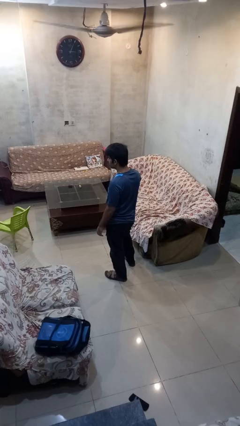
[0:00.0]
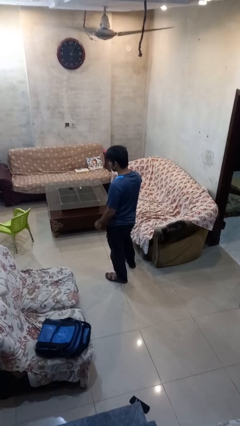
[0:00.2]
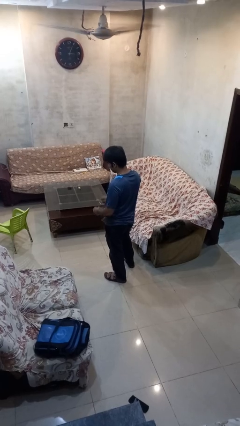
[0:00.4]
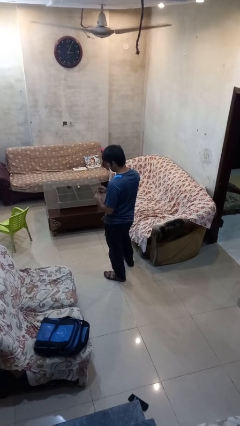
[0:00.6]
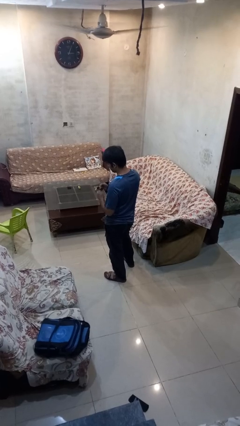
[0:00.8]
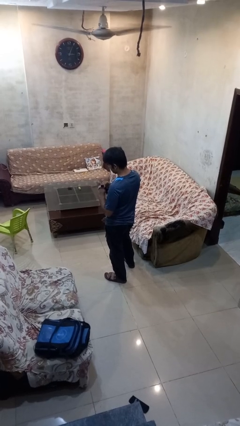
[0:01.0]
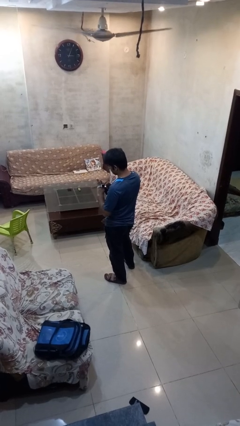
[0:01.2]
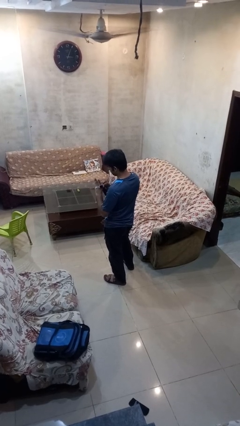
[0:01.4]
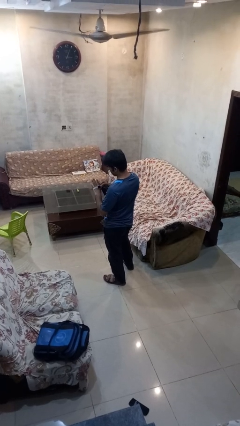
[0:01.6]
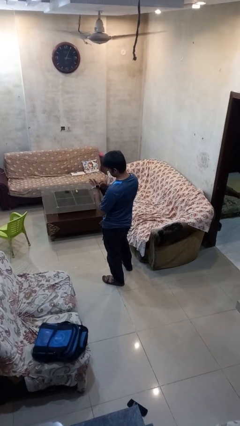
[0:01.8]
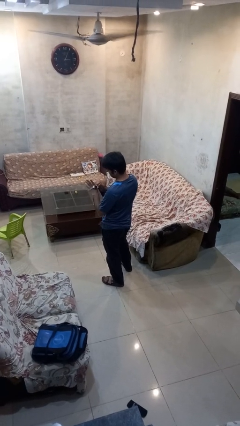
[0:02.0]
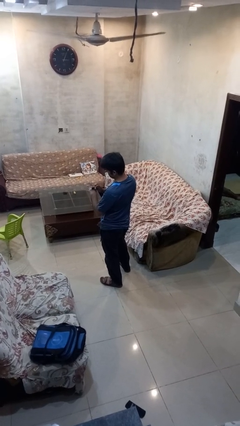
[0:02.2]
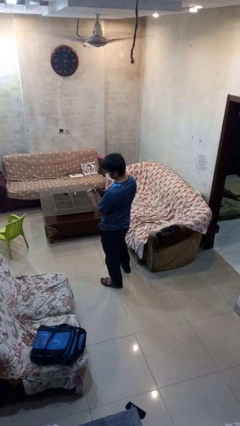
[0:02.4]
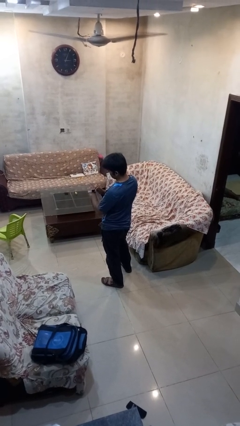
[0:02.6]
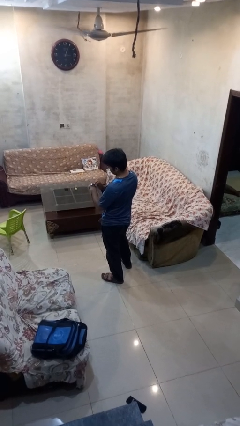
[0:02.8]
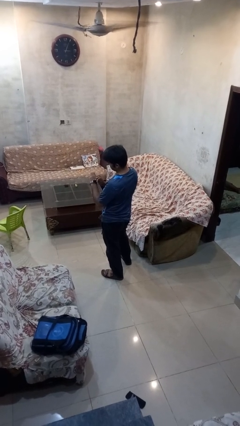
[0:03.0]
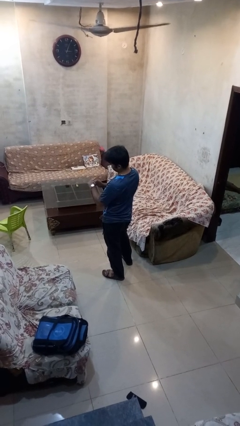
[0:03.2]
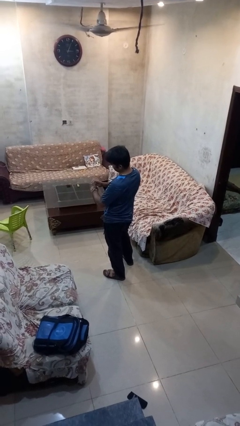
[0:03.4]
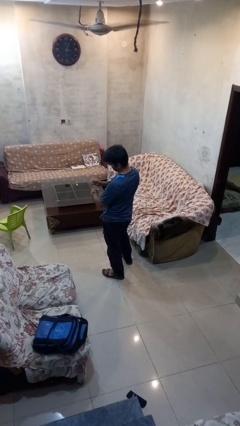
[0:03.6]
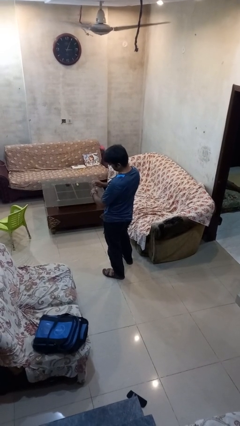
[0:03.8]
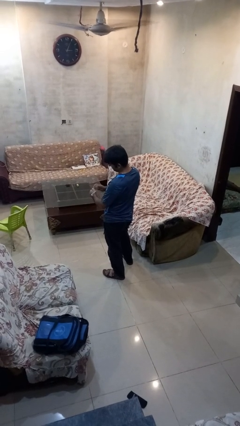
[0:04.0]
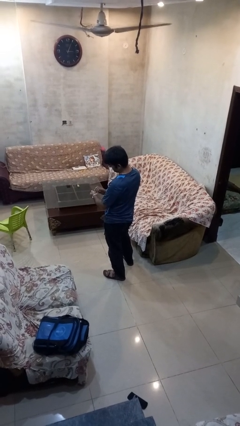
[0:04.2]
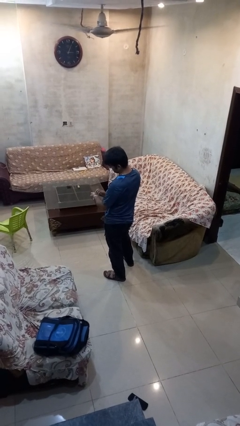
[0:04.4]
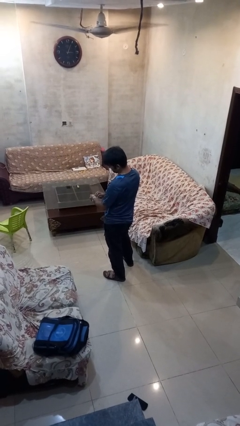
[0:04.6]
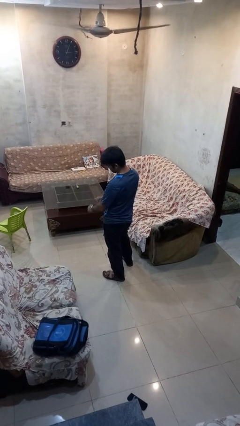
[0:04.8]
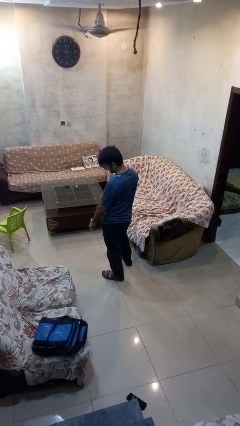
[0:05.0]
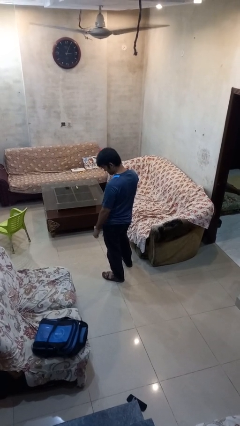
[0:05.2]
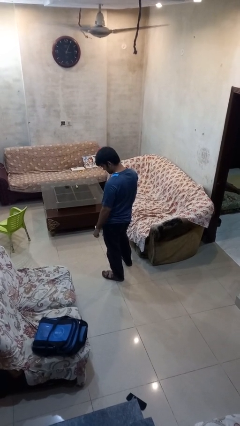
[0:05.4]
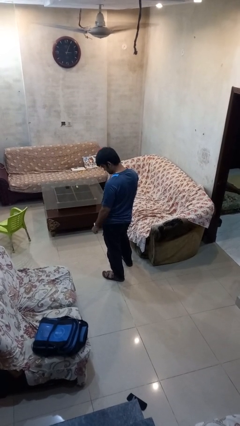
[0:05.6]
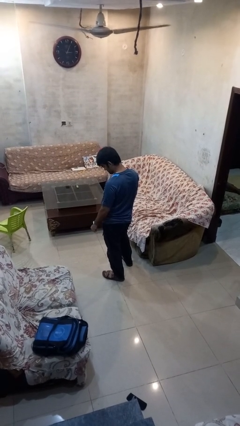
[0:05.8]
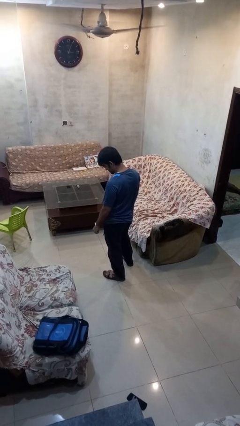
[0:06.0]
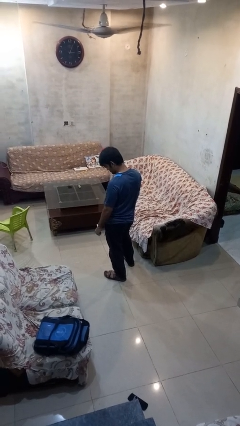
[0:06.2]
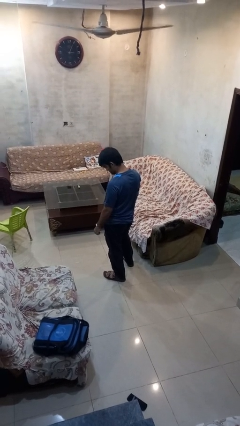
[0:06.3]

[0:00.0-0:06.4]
person puts on wristwatch

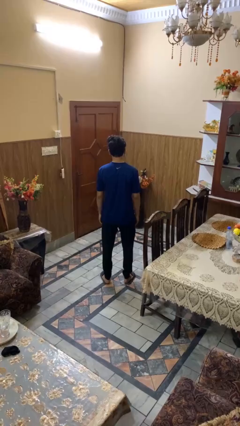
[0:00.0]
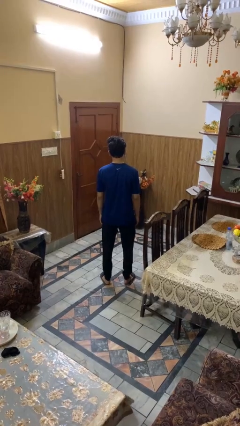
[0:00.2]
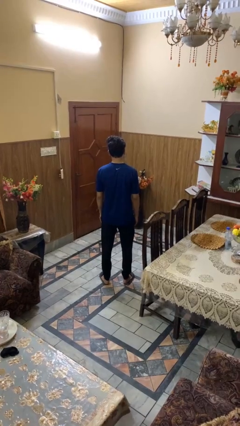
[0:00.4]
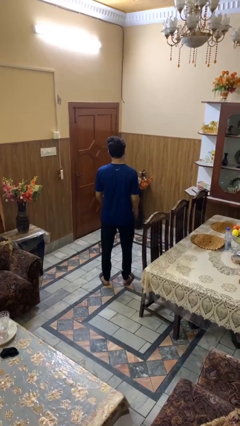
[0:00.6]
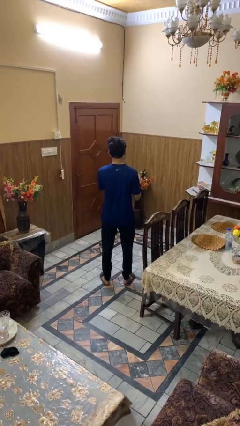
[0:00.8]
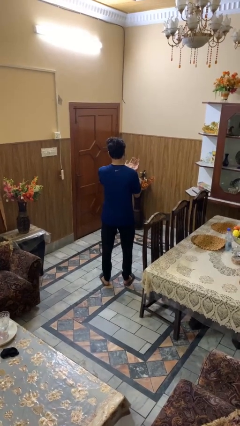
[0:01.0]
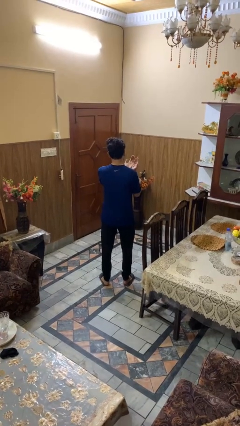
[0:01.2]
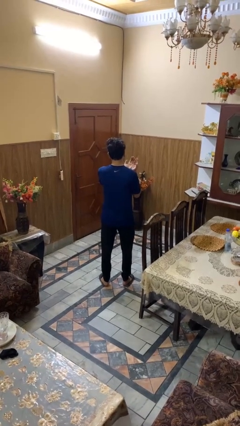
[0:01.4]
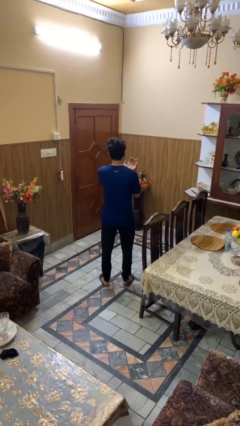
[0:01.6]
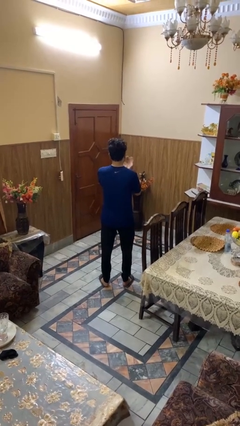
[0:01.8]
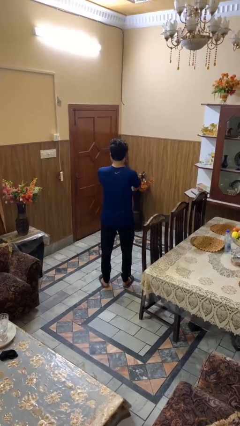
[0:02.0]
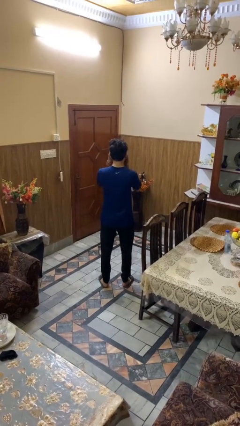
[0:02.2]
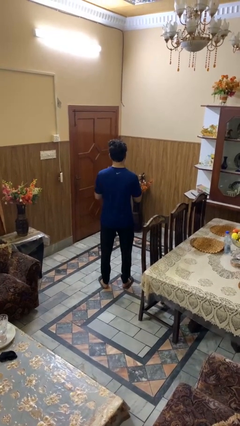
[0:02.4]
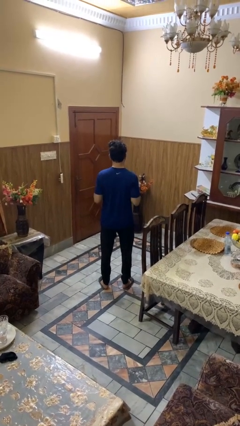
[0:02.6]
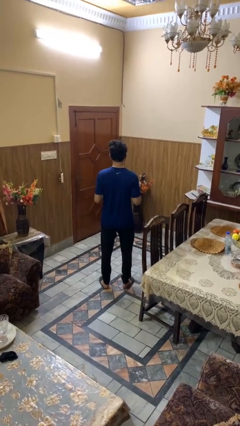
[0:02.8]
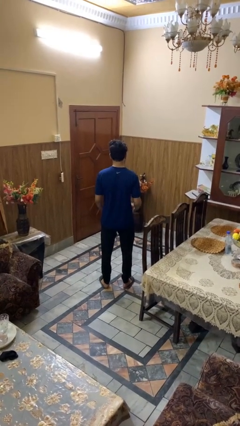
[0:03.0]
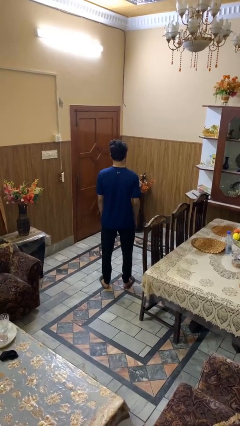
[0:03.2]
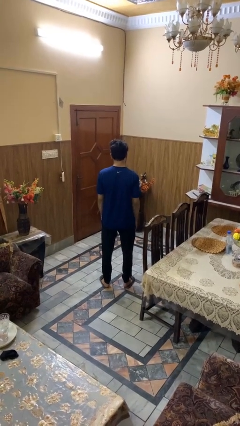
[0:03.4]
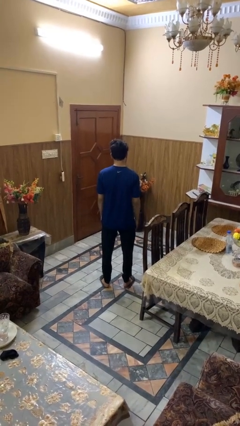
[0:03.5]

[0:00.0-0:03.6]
person prays

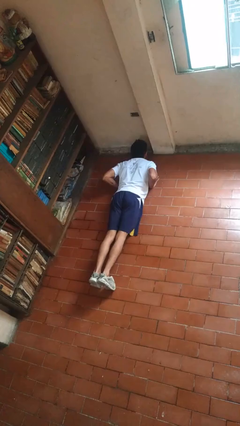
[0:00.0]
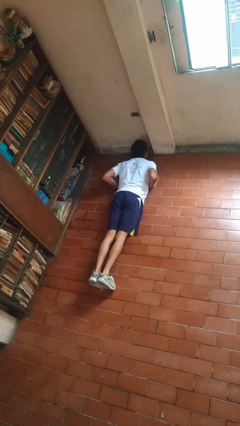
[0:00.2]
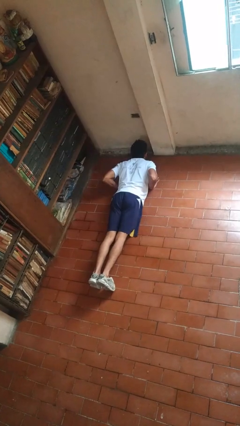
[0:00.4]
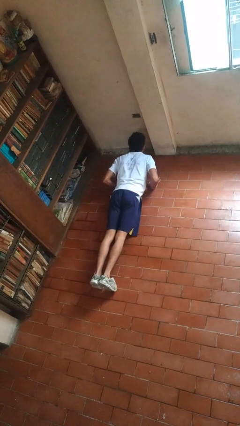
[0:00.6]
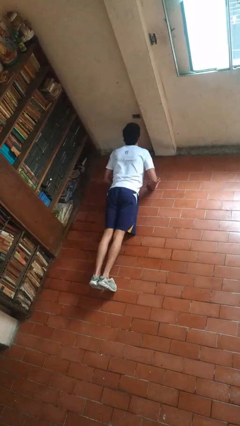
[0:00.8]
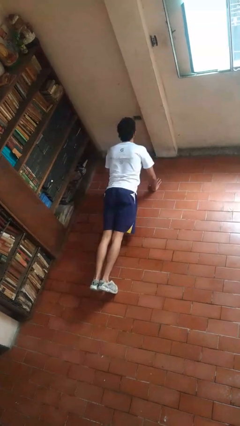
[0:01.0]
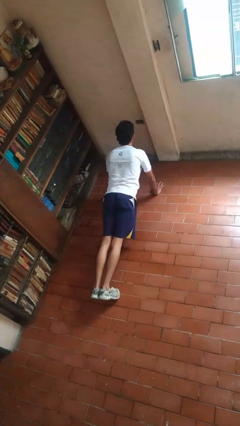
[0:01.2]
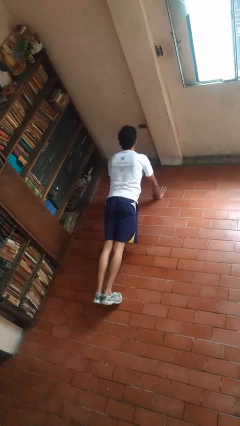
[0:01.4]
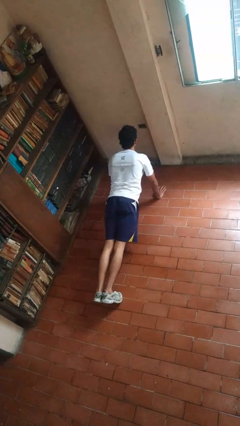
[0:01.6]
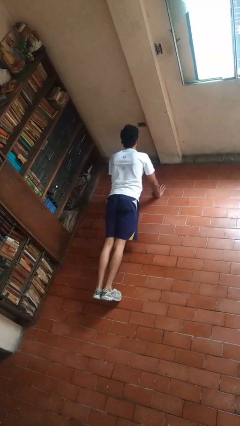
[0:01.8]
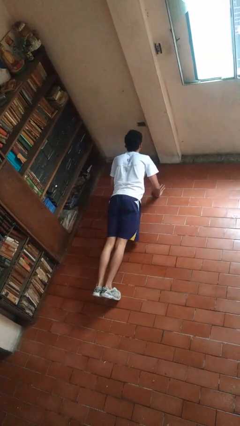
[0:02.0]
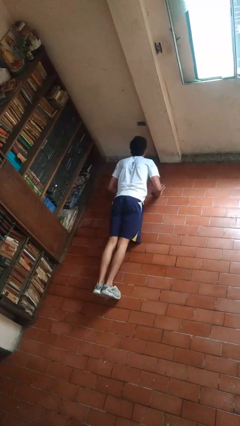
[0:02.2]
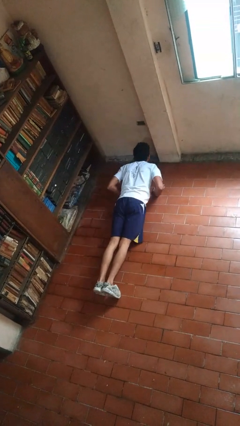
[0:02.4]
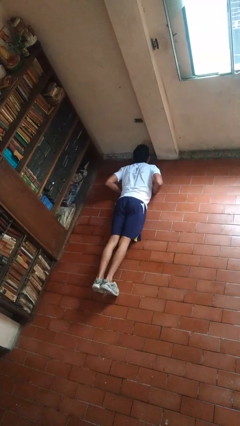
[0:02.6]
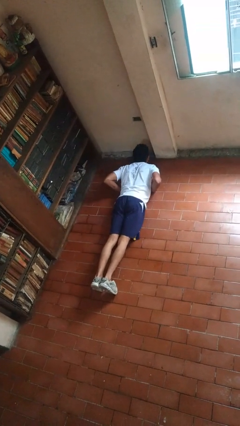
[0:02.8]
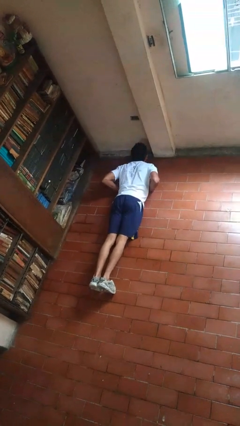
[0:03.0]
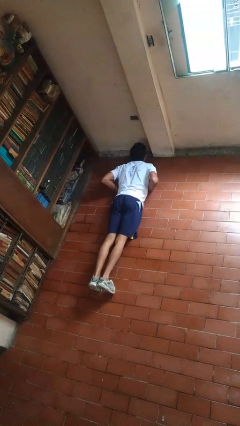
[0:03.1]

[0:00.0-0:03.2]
person exercises with pushup

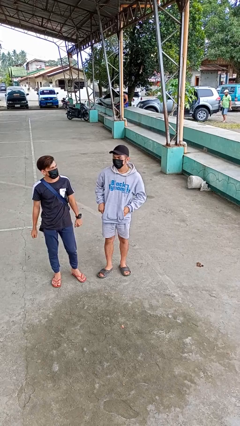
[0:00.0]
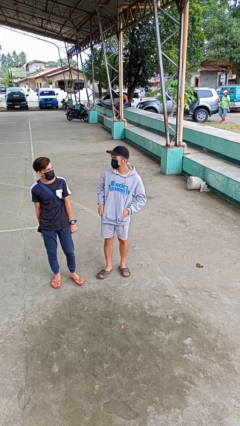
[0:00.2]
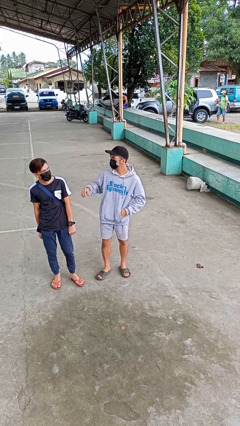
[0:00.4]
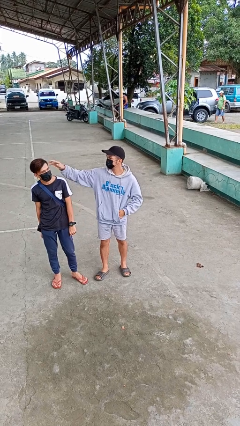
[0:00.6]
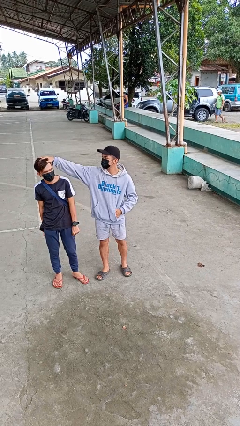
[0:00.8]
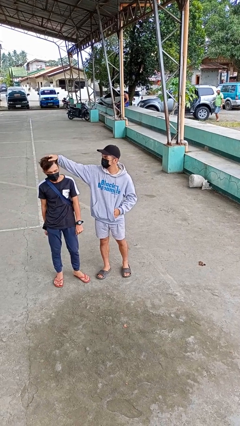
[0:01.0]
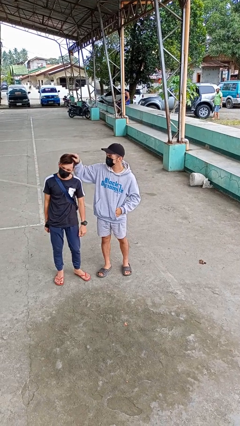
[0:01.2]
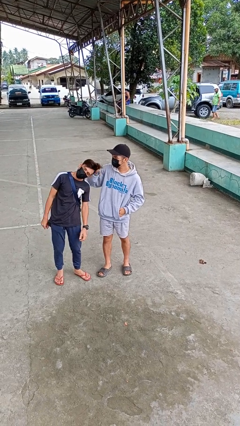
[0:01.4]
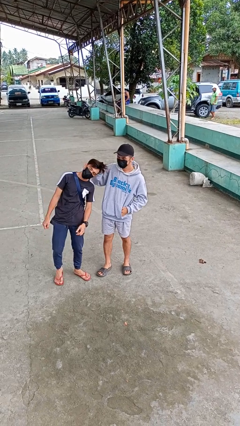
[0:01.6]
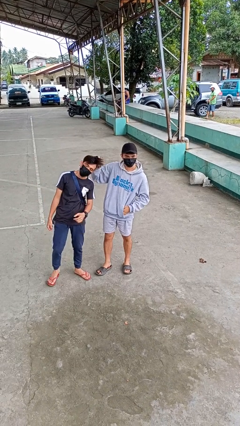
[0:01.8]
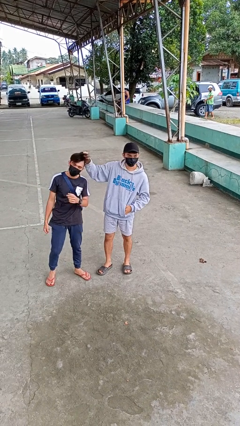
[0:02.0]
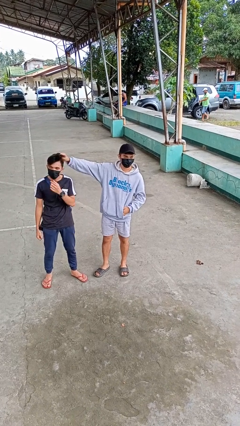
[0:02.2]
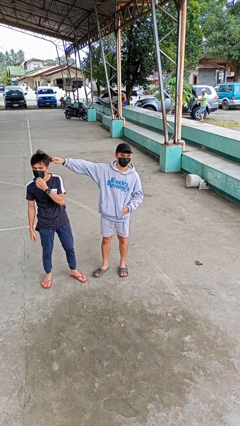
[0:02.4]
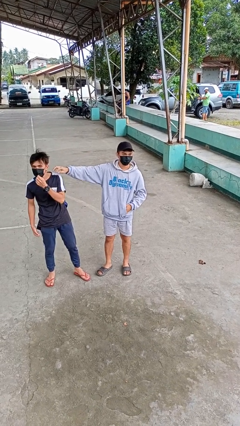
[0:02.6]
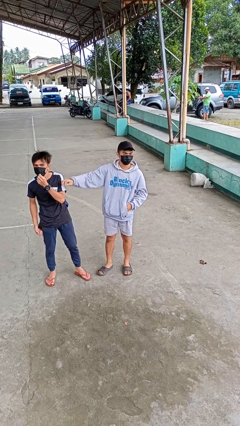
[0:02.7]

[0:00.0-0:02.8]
person grabs person by hair

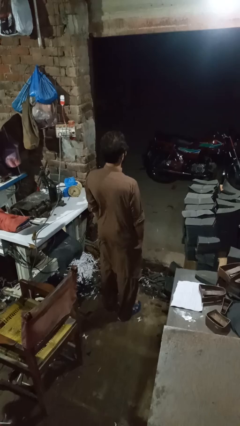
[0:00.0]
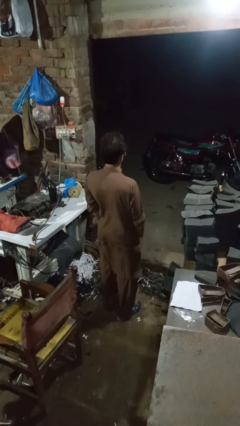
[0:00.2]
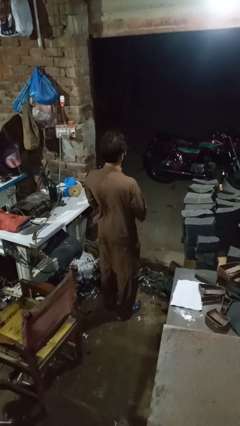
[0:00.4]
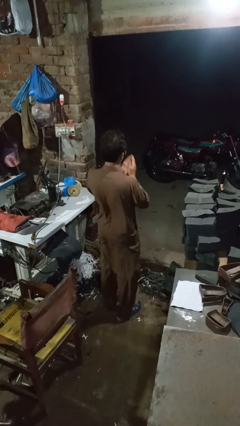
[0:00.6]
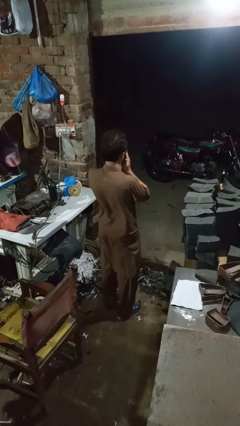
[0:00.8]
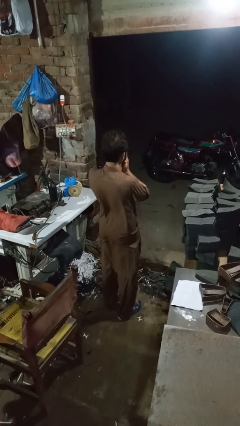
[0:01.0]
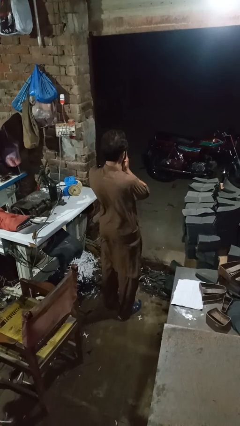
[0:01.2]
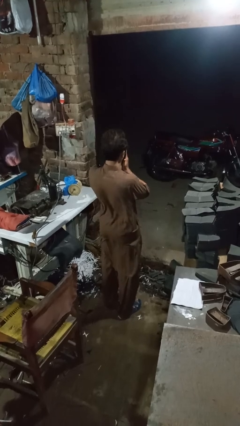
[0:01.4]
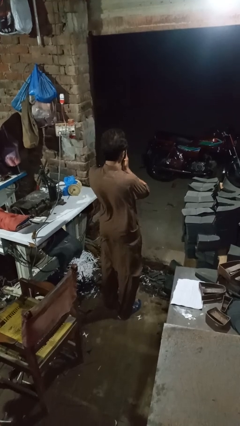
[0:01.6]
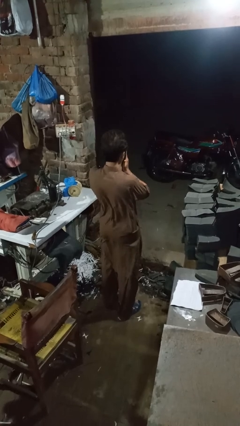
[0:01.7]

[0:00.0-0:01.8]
person sneezes into hand
